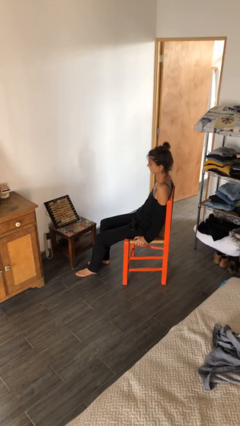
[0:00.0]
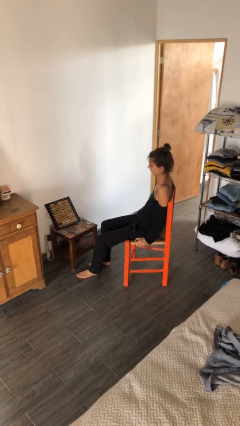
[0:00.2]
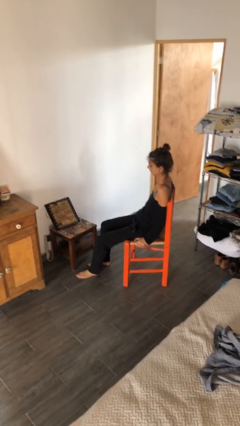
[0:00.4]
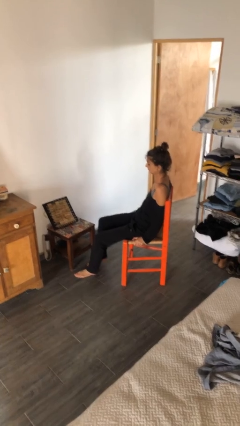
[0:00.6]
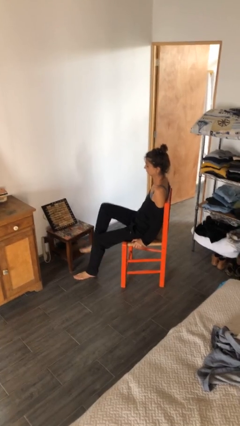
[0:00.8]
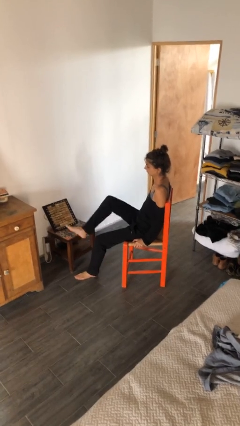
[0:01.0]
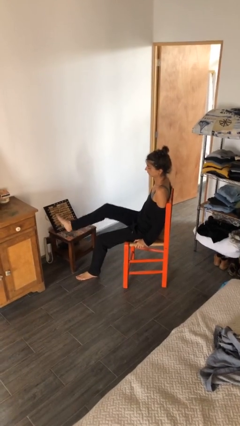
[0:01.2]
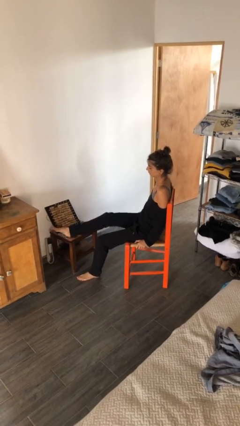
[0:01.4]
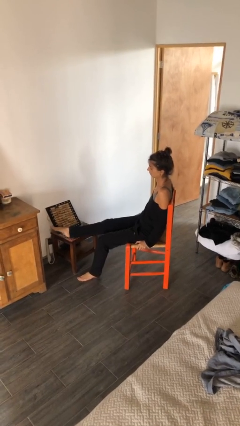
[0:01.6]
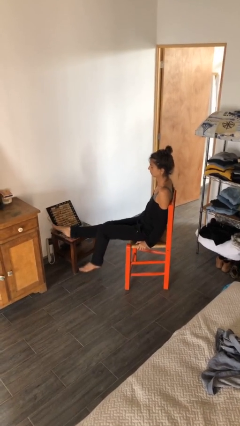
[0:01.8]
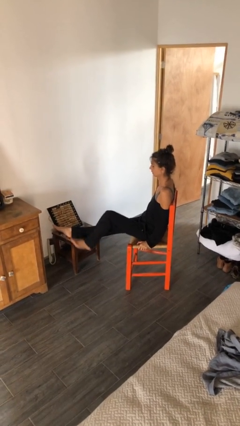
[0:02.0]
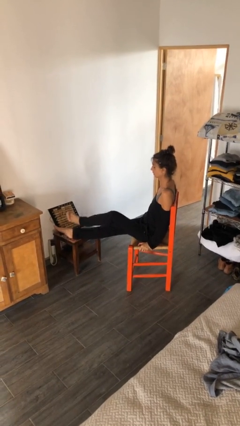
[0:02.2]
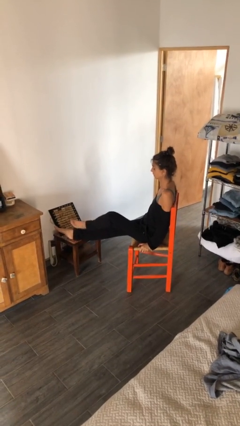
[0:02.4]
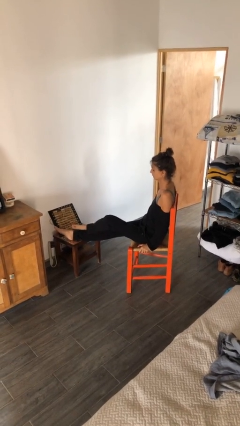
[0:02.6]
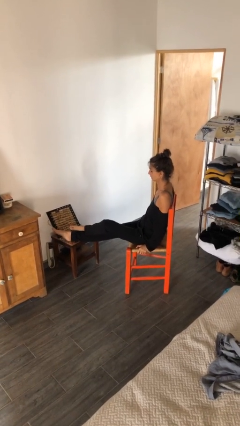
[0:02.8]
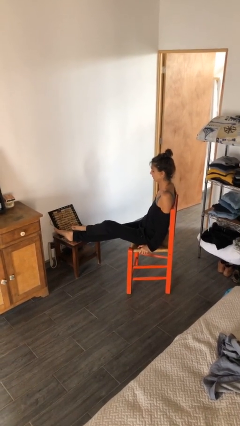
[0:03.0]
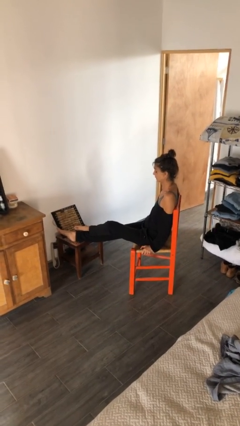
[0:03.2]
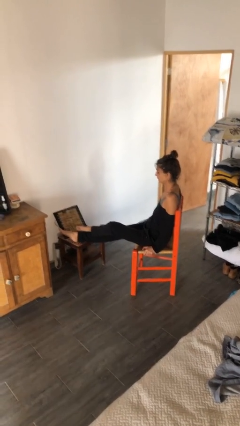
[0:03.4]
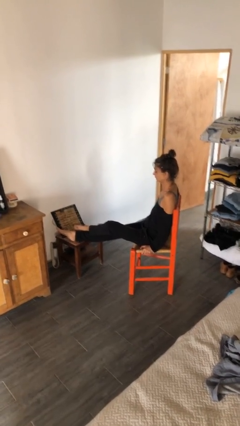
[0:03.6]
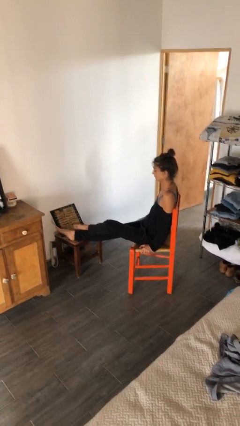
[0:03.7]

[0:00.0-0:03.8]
person puts feet up

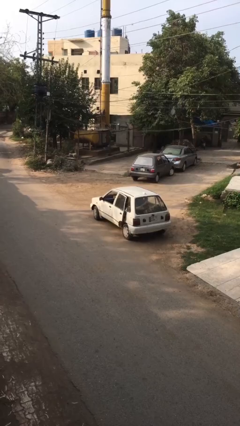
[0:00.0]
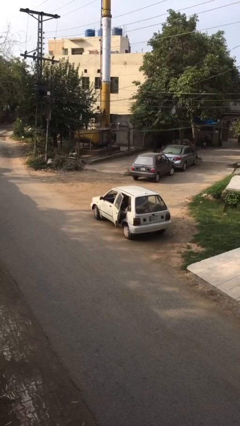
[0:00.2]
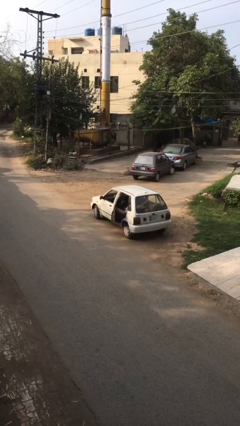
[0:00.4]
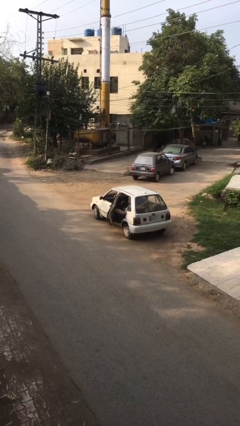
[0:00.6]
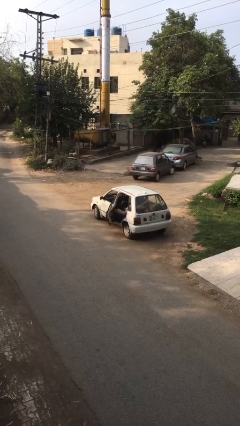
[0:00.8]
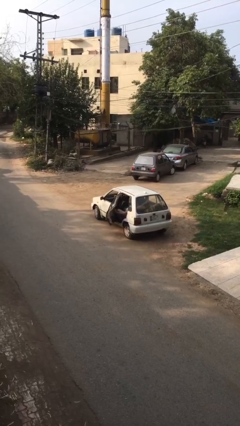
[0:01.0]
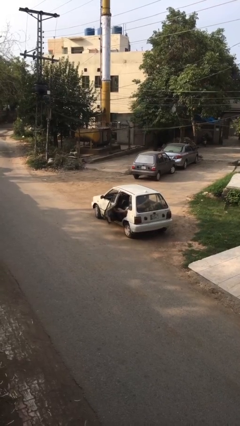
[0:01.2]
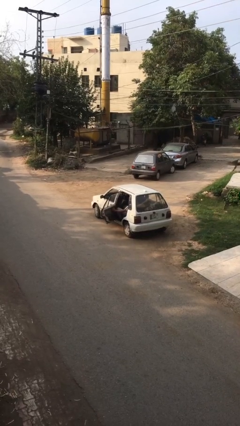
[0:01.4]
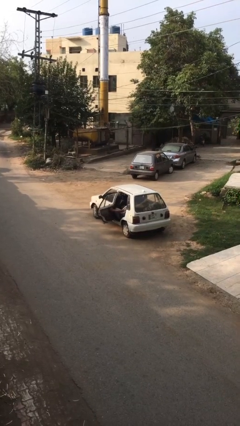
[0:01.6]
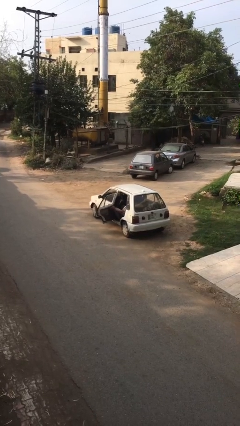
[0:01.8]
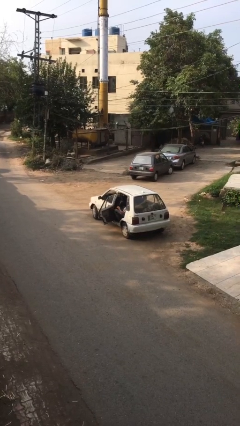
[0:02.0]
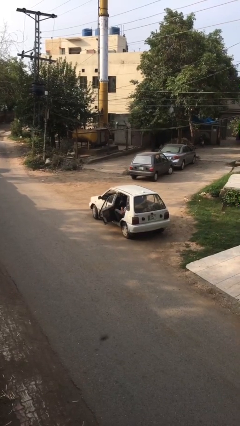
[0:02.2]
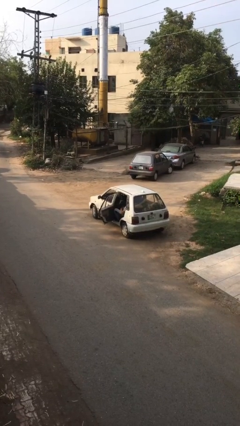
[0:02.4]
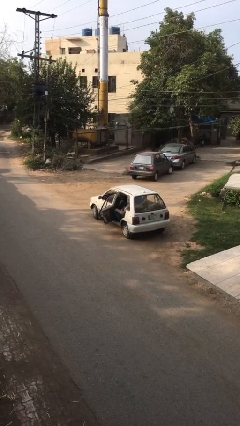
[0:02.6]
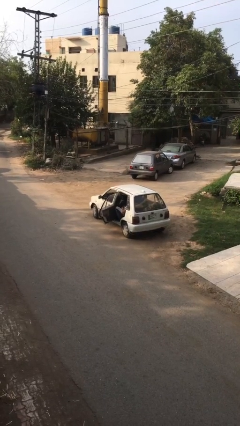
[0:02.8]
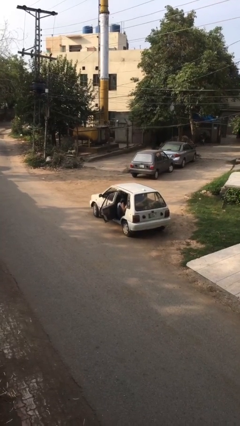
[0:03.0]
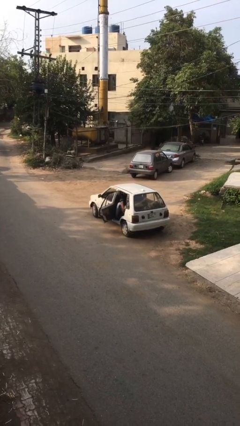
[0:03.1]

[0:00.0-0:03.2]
person opens car door

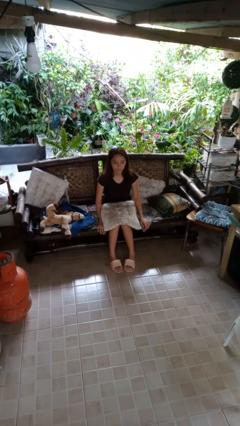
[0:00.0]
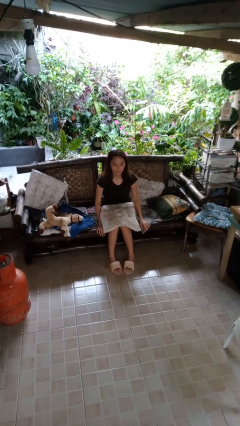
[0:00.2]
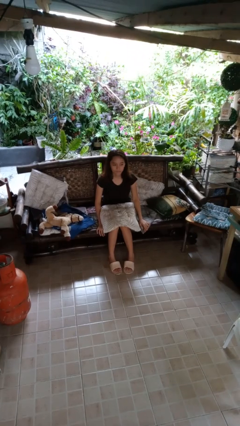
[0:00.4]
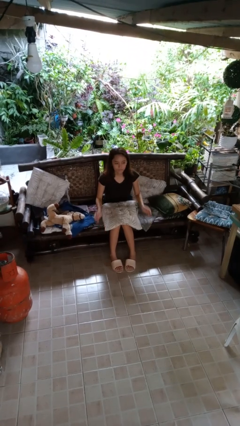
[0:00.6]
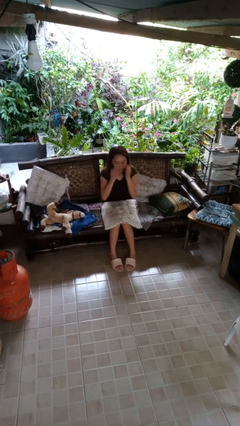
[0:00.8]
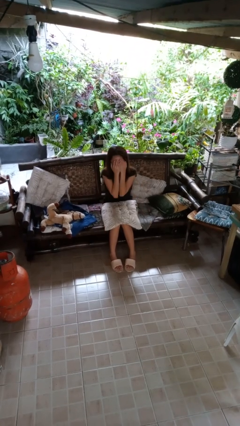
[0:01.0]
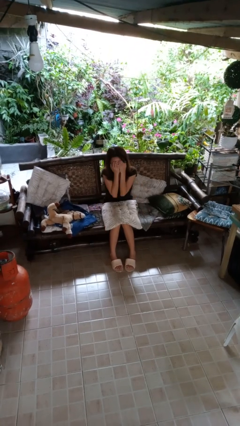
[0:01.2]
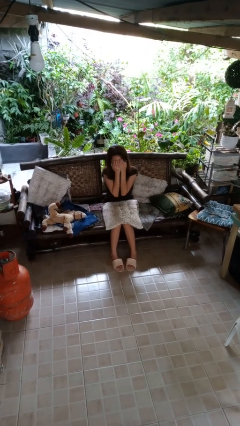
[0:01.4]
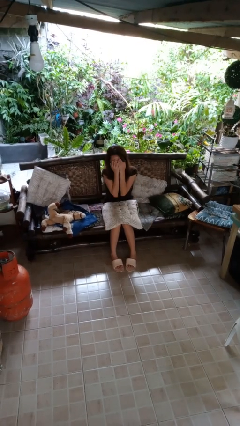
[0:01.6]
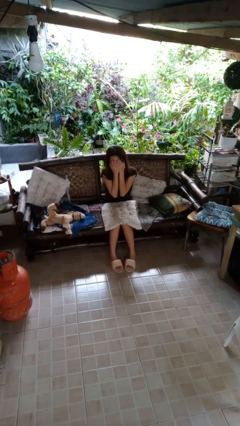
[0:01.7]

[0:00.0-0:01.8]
person covers face with hands

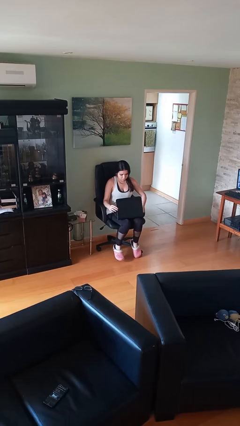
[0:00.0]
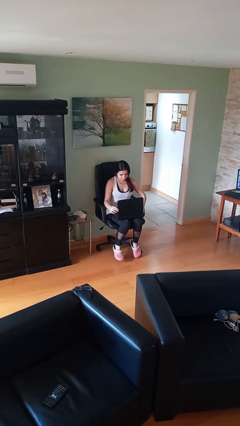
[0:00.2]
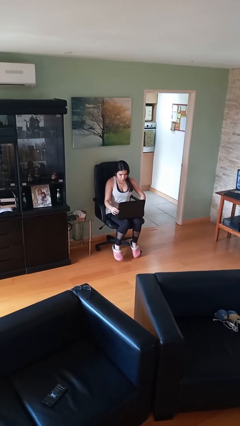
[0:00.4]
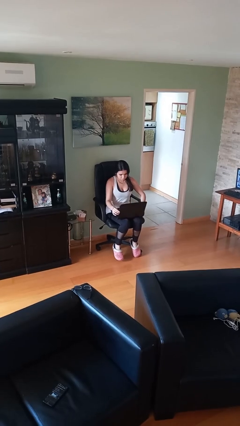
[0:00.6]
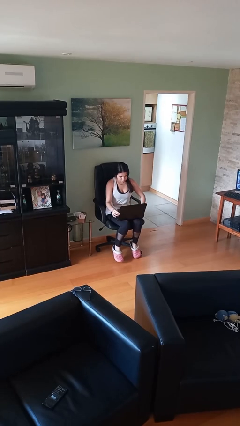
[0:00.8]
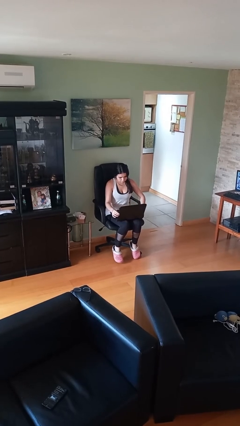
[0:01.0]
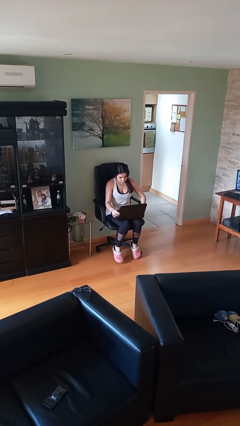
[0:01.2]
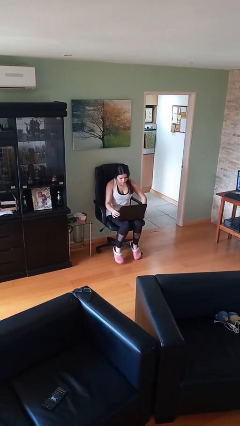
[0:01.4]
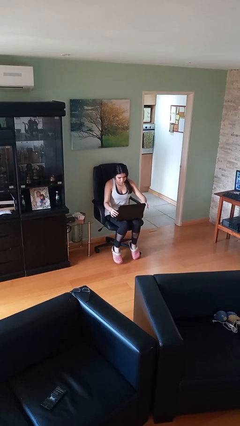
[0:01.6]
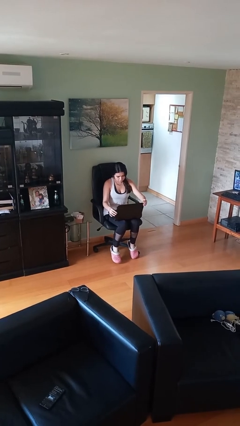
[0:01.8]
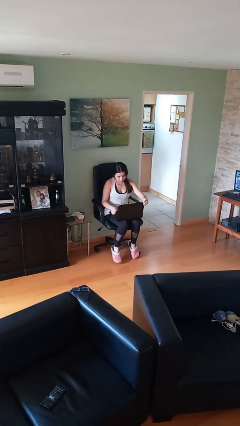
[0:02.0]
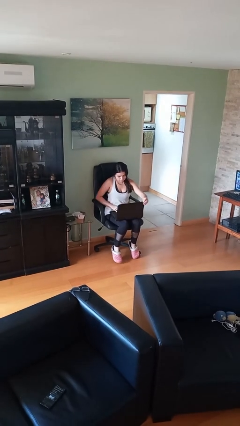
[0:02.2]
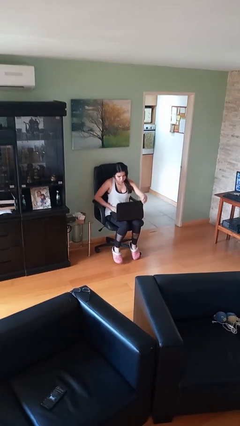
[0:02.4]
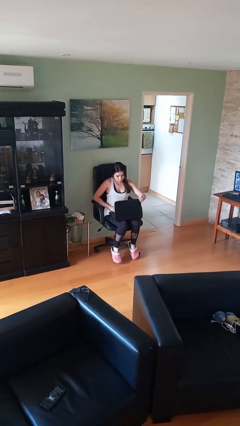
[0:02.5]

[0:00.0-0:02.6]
person interacts with laptop

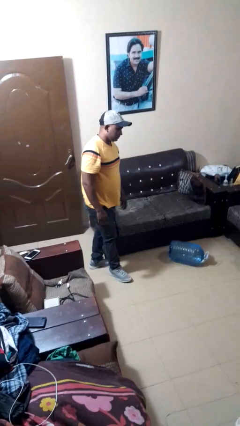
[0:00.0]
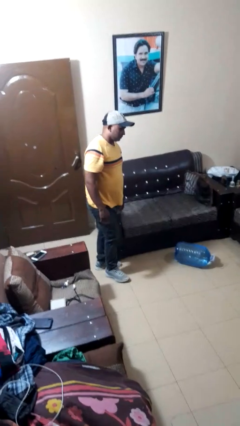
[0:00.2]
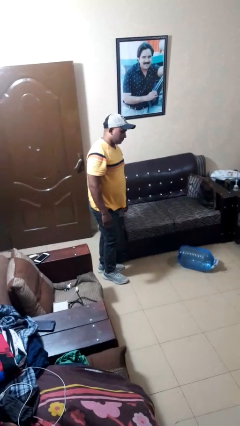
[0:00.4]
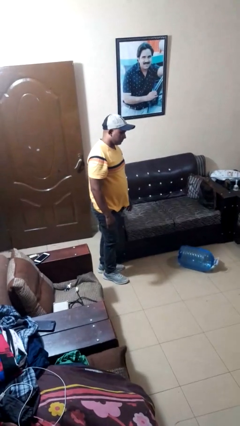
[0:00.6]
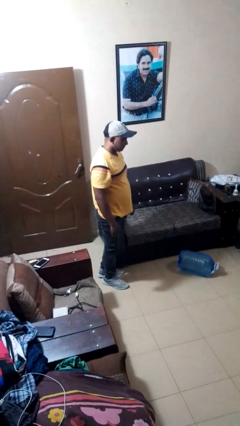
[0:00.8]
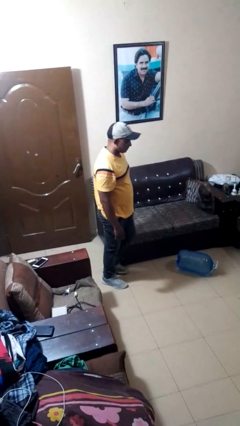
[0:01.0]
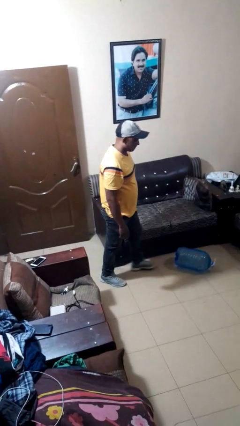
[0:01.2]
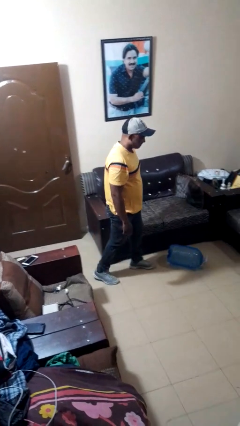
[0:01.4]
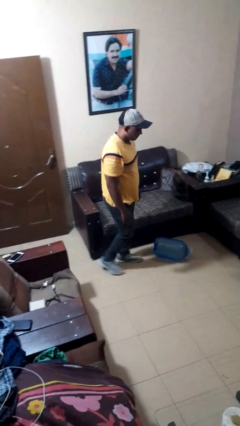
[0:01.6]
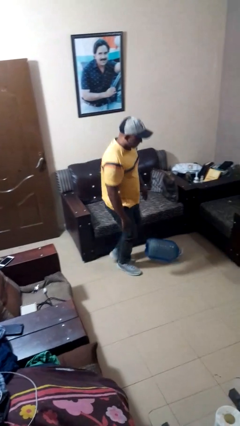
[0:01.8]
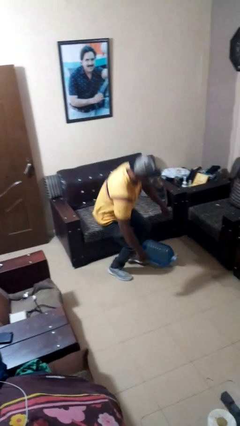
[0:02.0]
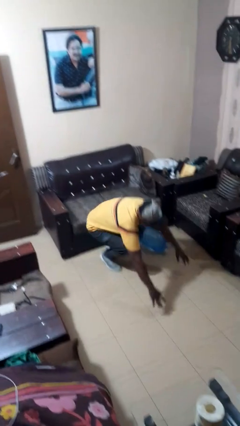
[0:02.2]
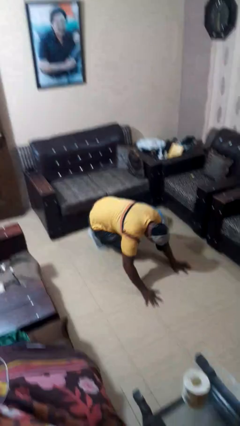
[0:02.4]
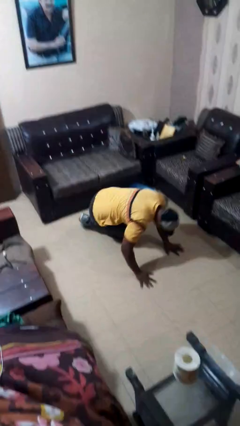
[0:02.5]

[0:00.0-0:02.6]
person trips on object on floor

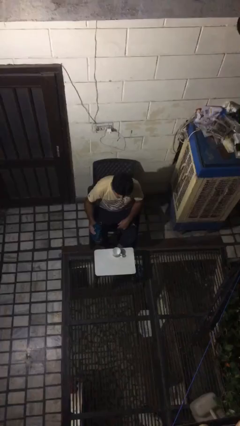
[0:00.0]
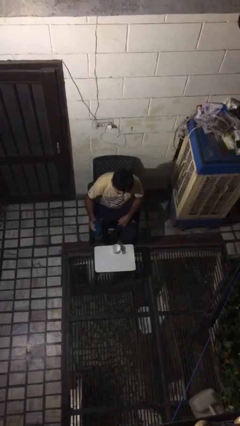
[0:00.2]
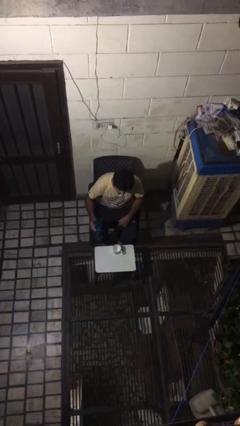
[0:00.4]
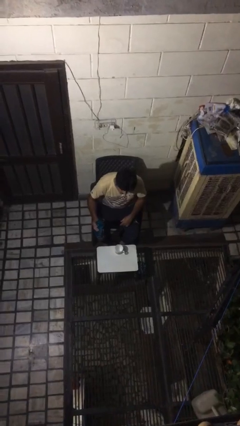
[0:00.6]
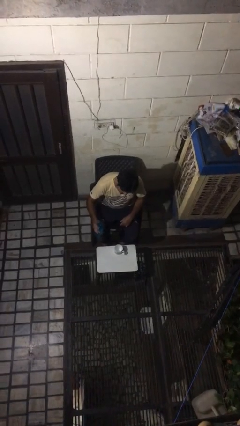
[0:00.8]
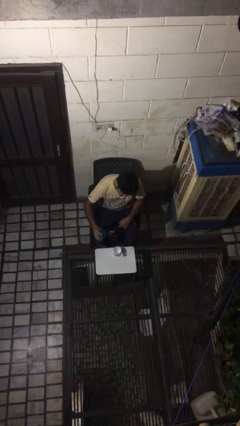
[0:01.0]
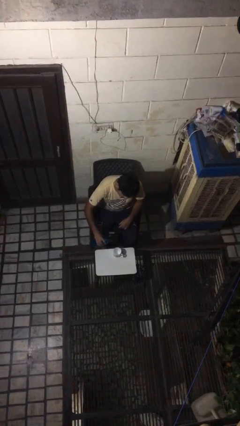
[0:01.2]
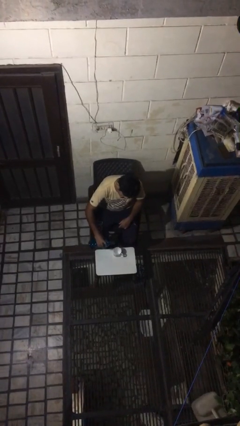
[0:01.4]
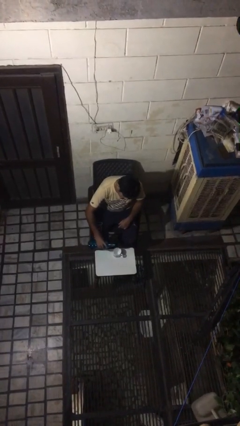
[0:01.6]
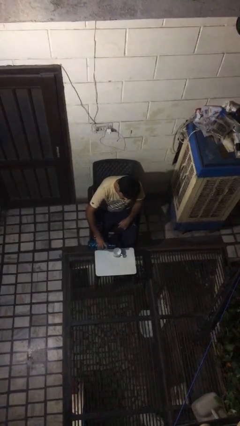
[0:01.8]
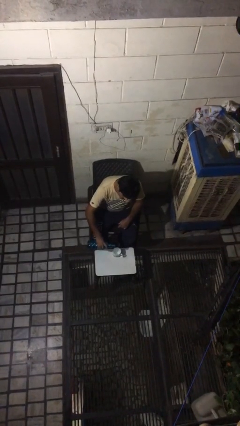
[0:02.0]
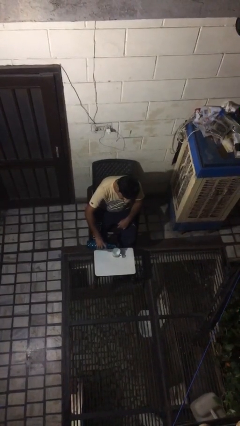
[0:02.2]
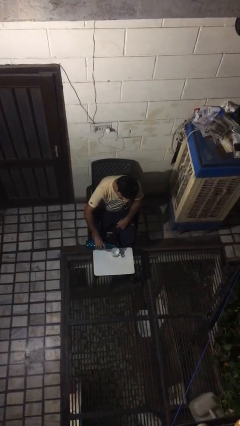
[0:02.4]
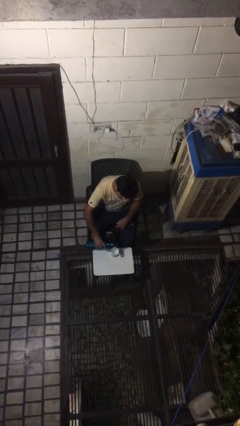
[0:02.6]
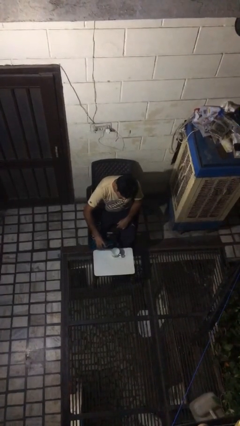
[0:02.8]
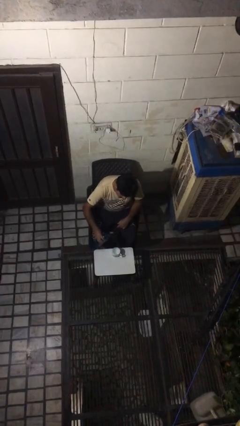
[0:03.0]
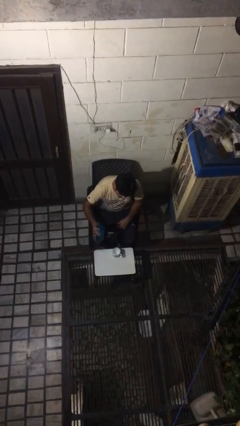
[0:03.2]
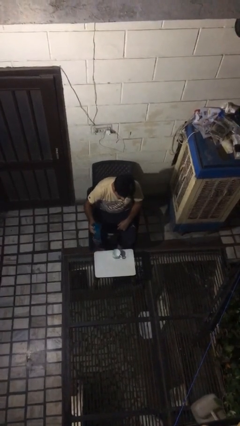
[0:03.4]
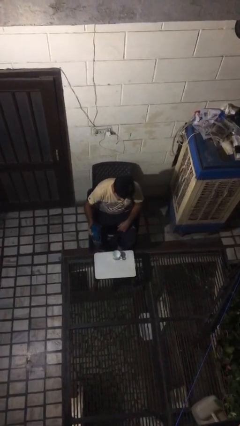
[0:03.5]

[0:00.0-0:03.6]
person pours liquid into cup

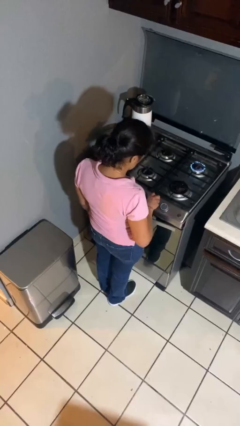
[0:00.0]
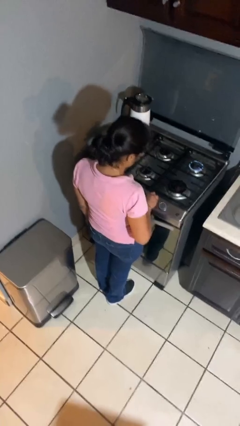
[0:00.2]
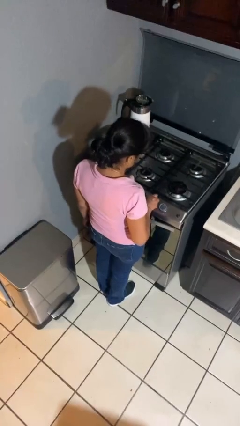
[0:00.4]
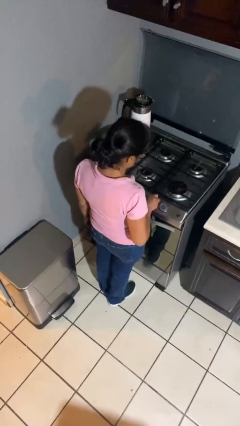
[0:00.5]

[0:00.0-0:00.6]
person turns off stovetop
